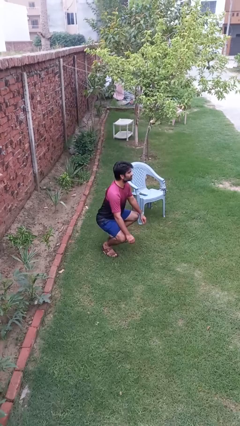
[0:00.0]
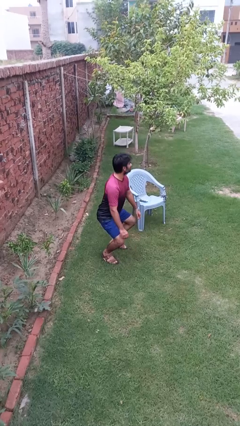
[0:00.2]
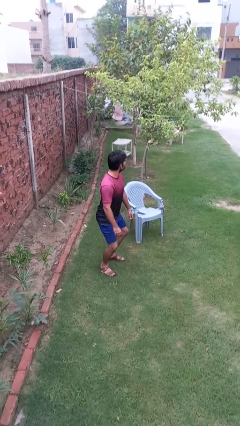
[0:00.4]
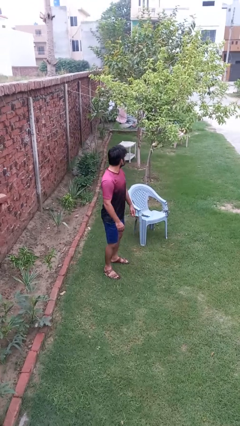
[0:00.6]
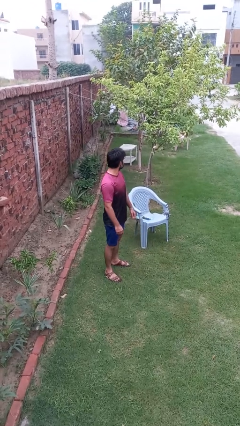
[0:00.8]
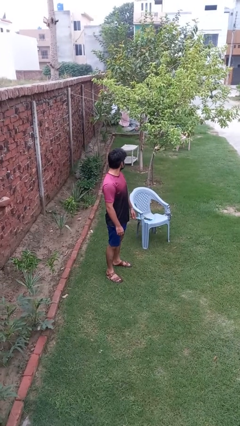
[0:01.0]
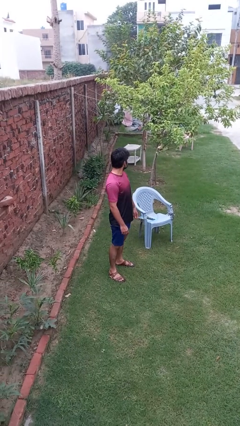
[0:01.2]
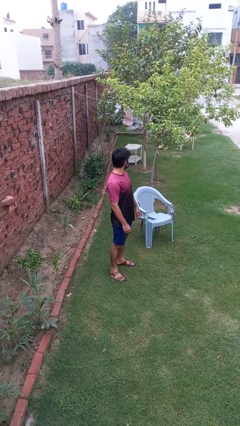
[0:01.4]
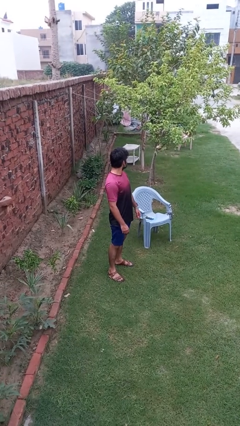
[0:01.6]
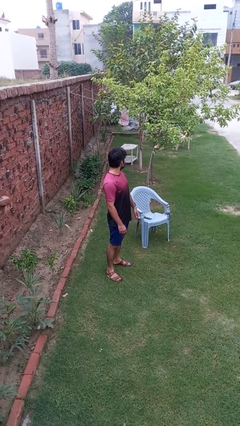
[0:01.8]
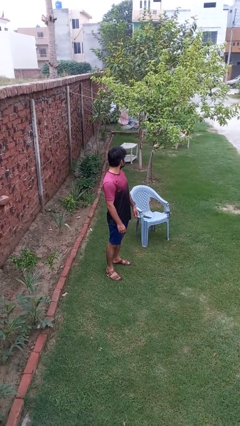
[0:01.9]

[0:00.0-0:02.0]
person stands up

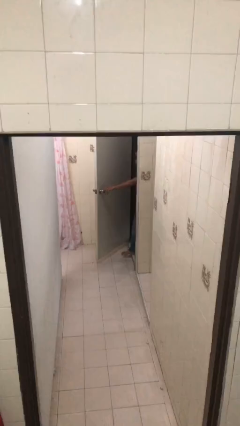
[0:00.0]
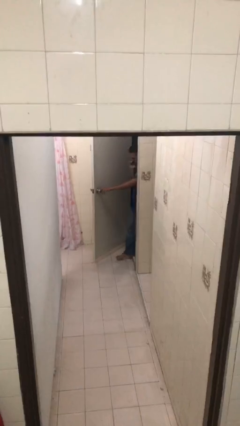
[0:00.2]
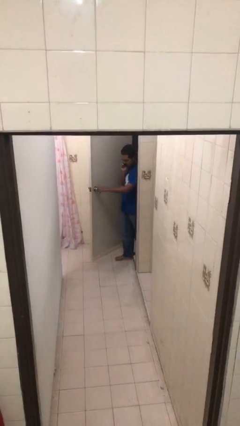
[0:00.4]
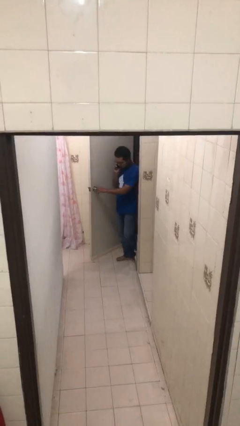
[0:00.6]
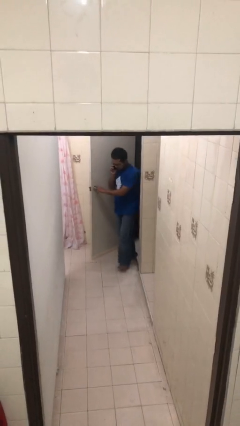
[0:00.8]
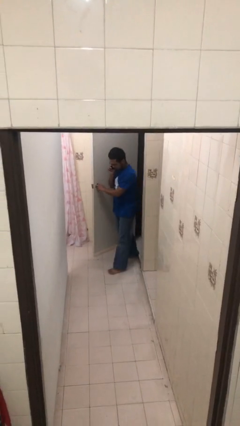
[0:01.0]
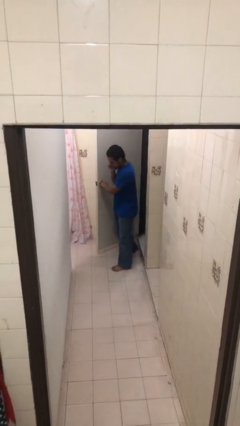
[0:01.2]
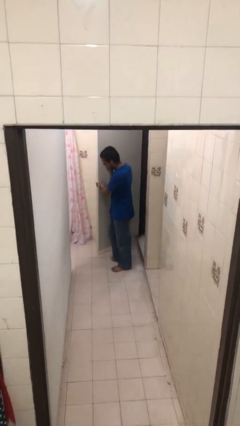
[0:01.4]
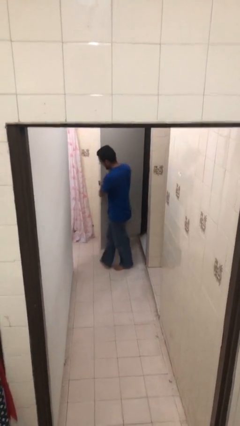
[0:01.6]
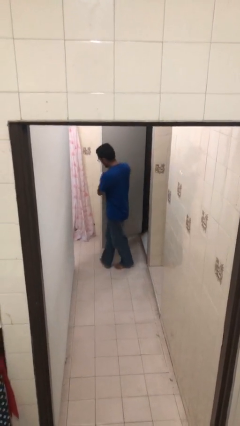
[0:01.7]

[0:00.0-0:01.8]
person enters scene through structure

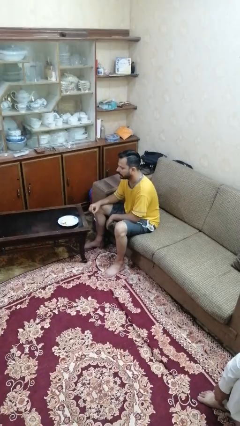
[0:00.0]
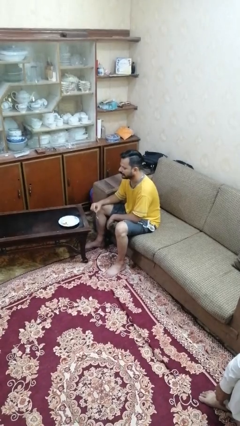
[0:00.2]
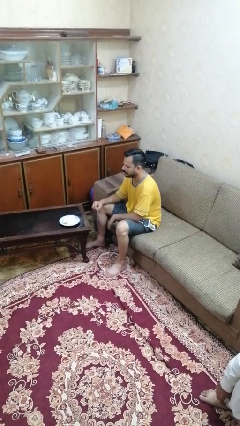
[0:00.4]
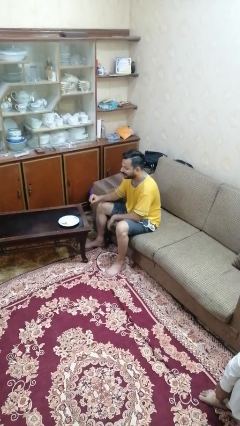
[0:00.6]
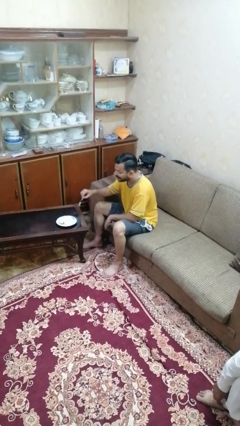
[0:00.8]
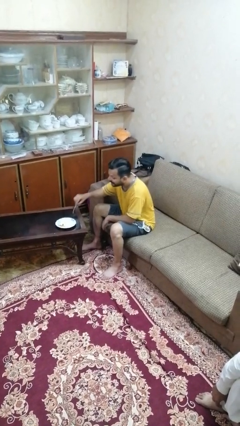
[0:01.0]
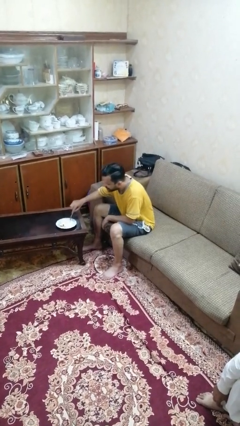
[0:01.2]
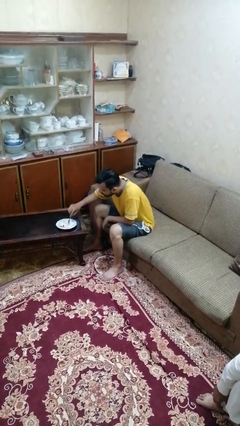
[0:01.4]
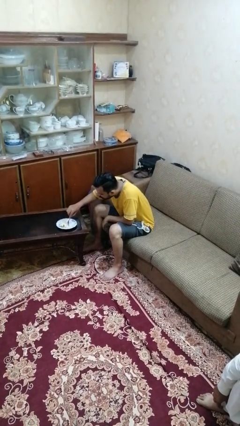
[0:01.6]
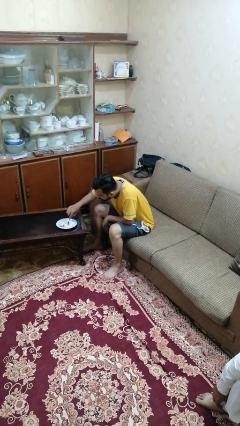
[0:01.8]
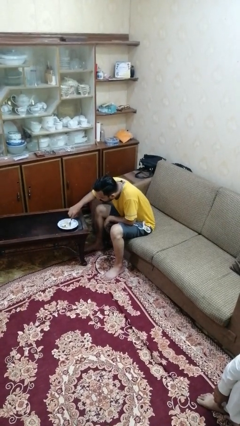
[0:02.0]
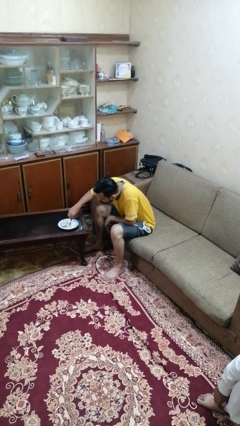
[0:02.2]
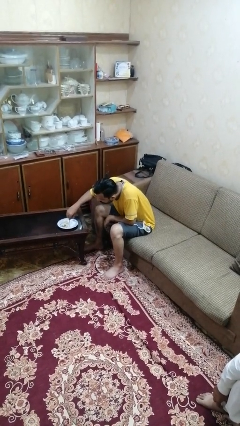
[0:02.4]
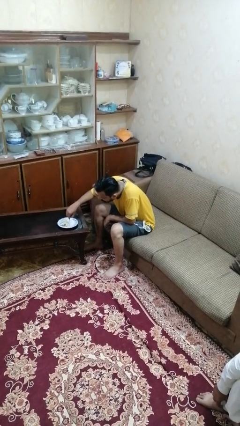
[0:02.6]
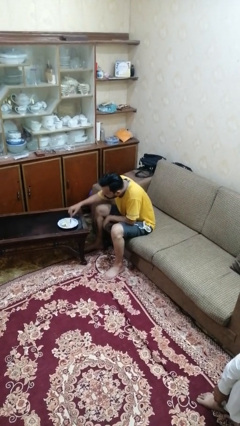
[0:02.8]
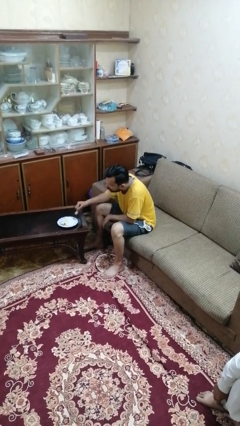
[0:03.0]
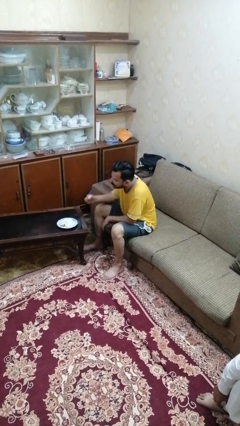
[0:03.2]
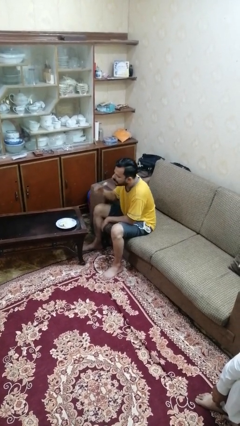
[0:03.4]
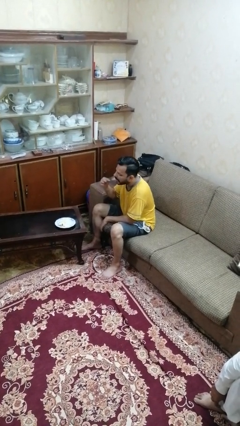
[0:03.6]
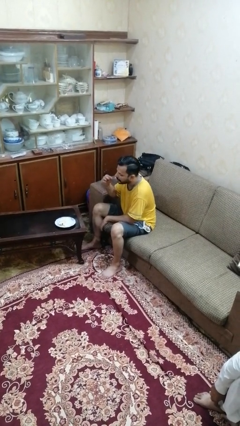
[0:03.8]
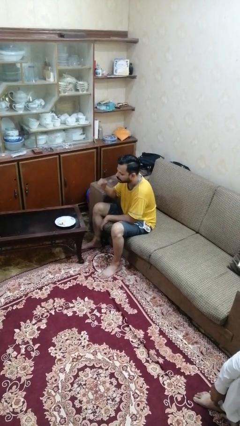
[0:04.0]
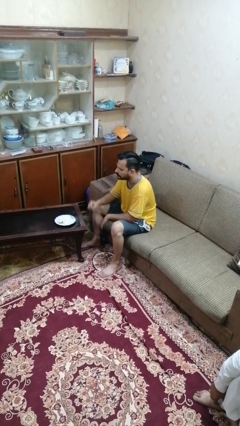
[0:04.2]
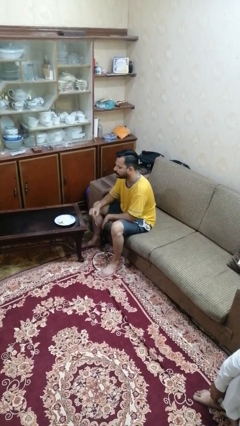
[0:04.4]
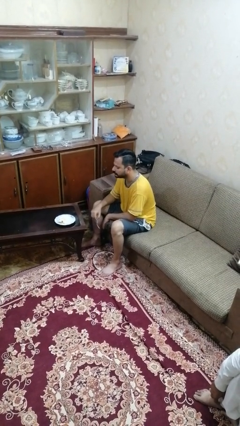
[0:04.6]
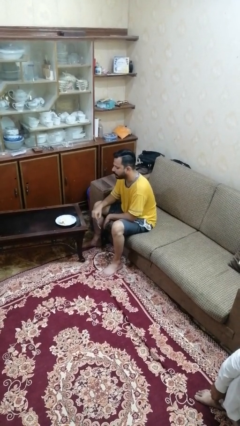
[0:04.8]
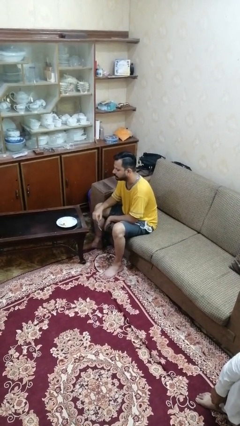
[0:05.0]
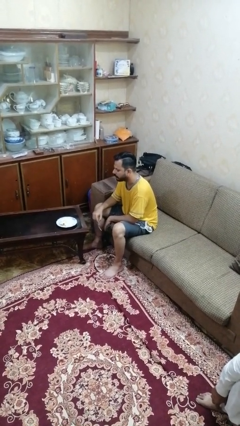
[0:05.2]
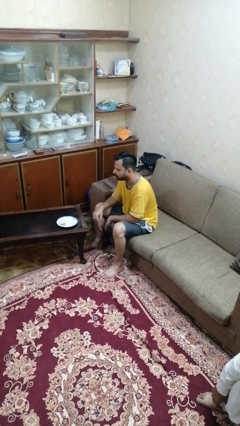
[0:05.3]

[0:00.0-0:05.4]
person eats with utensil

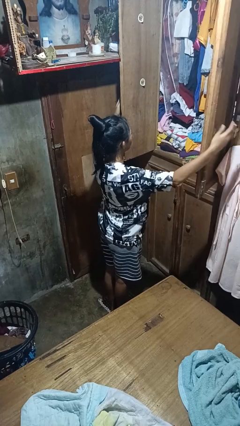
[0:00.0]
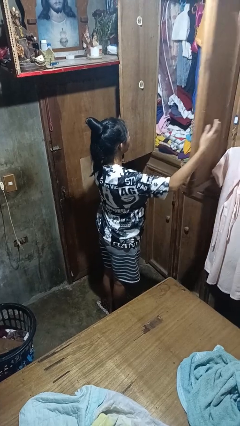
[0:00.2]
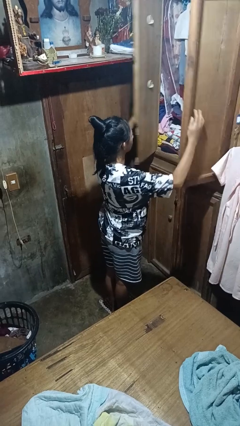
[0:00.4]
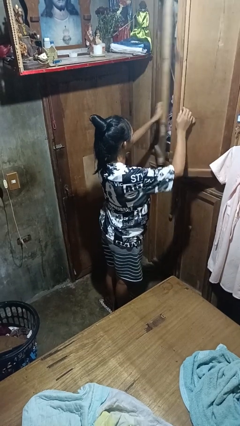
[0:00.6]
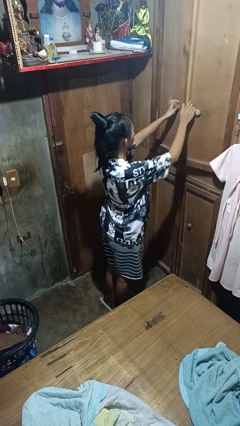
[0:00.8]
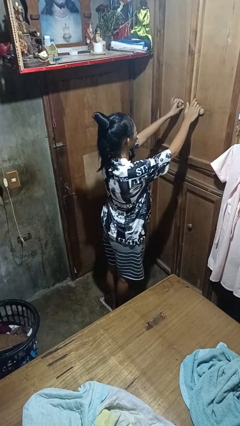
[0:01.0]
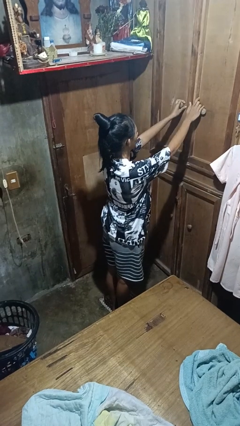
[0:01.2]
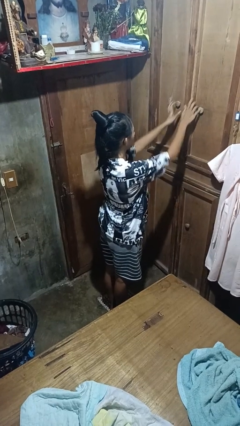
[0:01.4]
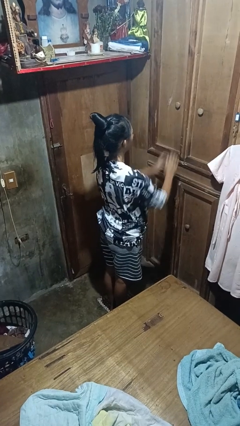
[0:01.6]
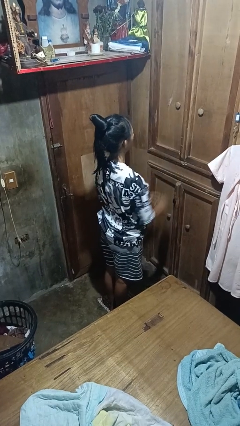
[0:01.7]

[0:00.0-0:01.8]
person closes closet door

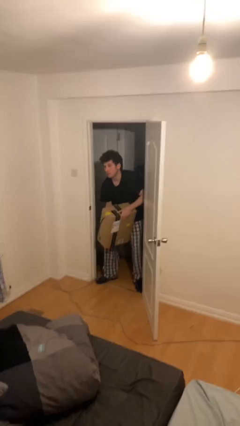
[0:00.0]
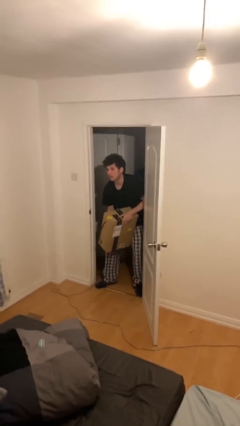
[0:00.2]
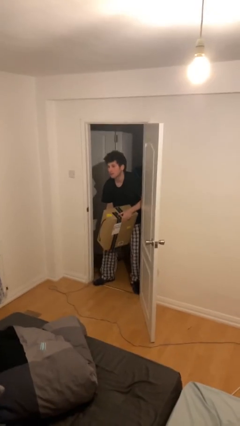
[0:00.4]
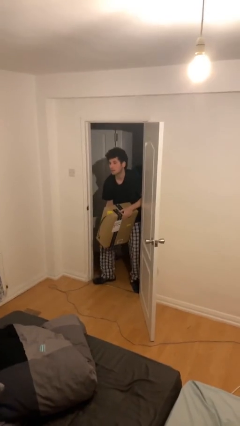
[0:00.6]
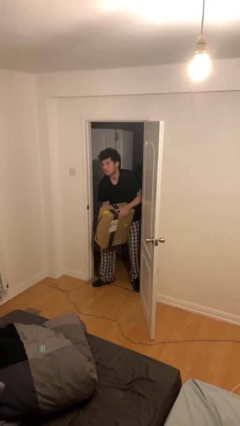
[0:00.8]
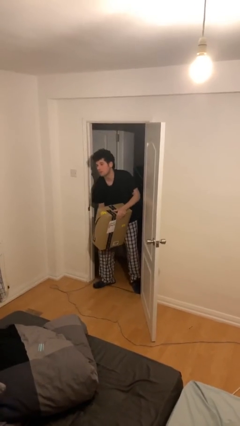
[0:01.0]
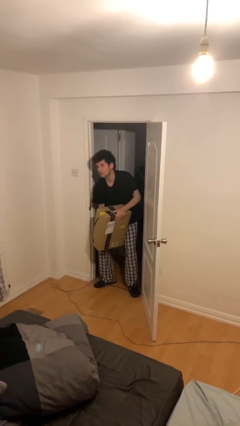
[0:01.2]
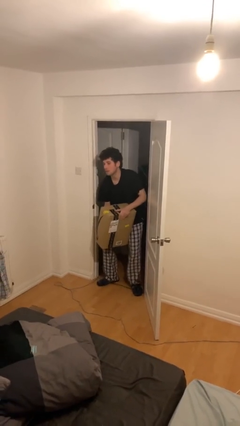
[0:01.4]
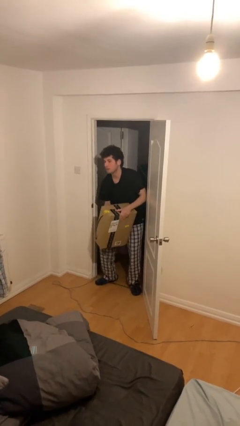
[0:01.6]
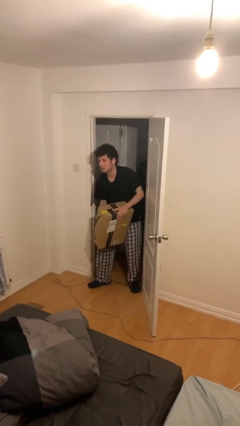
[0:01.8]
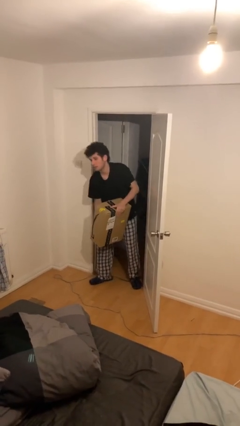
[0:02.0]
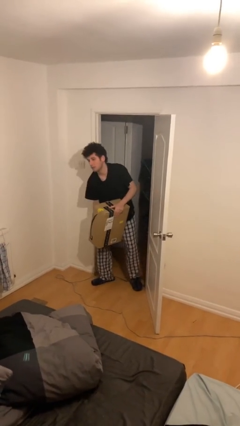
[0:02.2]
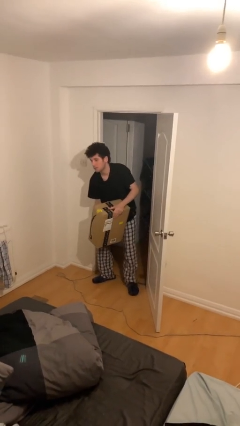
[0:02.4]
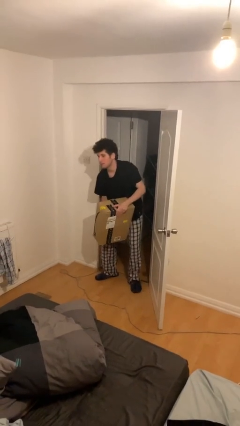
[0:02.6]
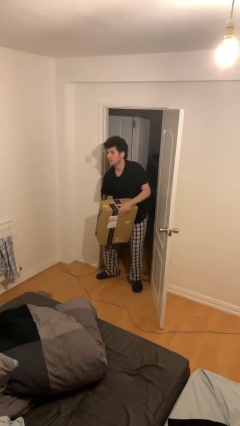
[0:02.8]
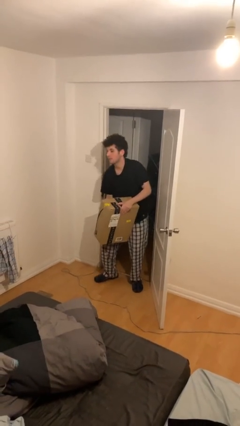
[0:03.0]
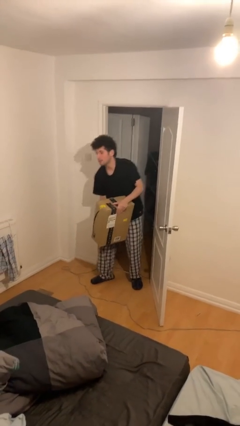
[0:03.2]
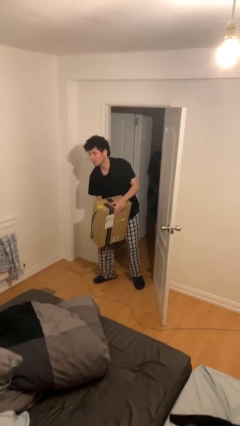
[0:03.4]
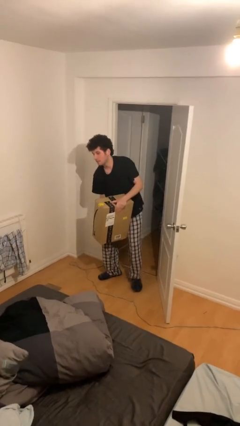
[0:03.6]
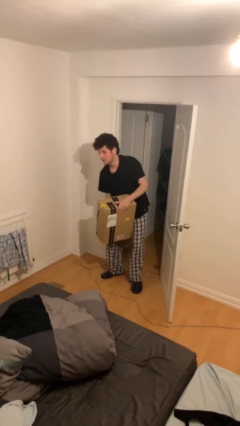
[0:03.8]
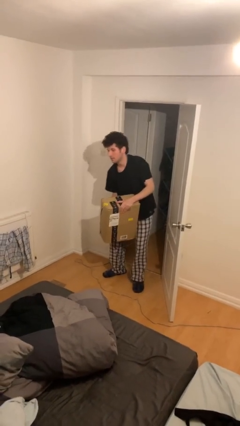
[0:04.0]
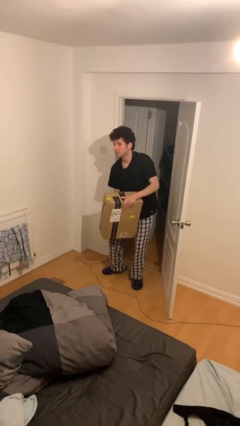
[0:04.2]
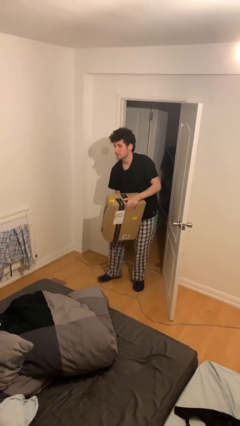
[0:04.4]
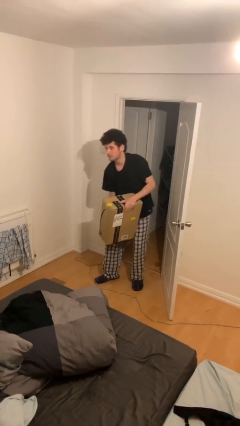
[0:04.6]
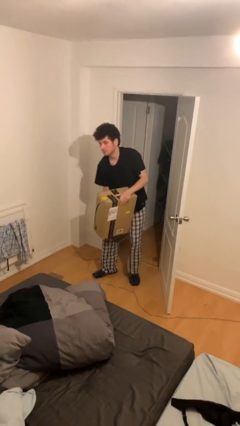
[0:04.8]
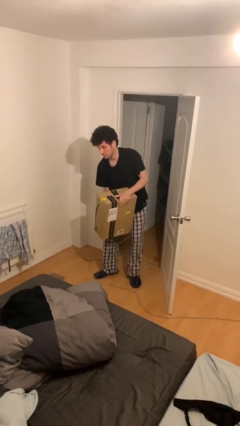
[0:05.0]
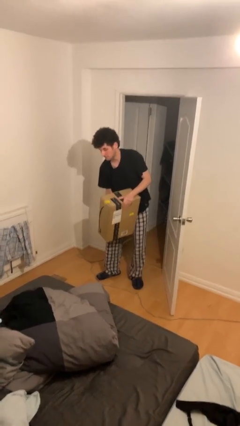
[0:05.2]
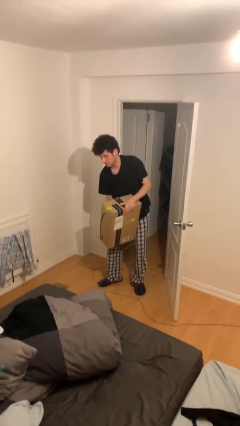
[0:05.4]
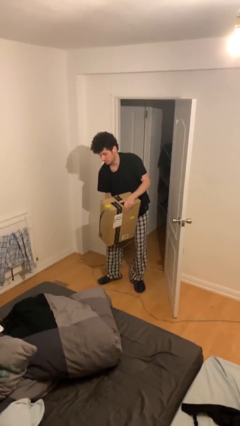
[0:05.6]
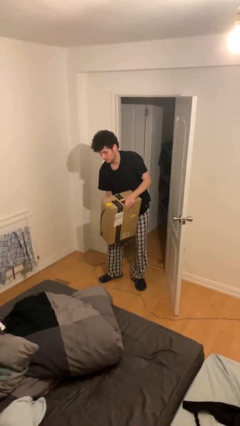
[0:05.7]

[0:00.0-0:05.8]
person carries heavy object

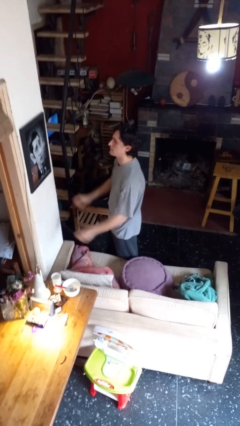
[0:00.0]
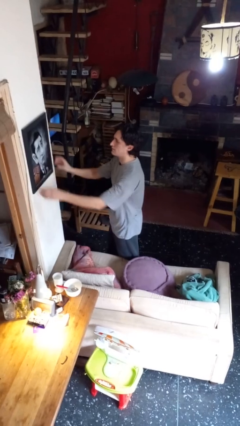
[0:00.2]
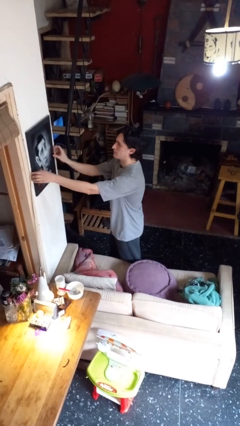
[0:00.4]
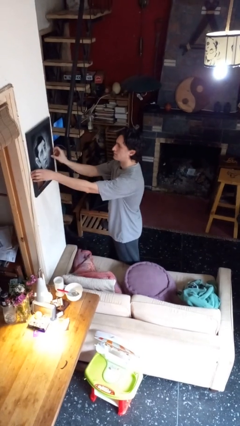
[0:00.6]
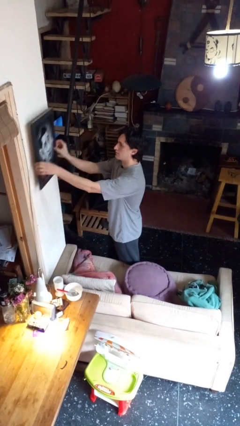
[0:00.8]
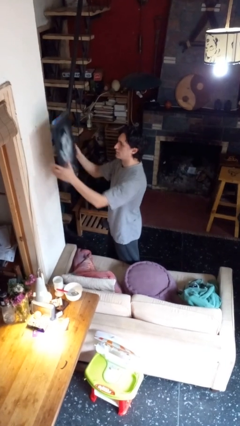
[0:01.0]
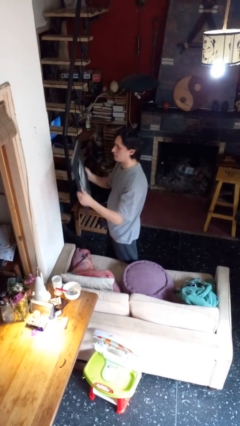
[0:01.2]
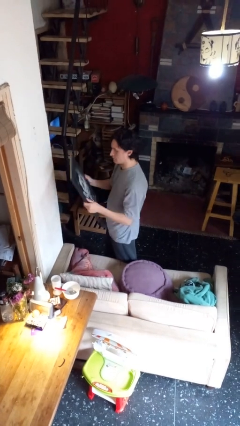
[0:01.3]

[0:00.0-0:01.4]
person takes down picture frame
